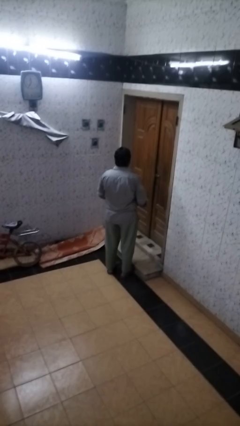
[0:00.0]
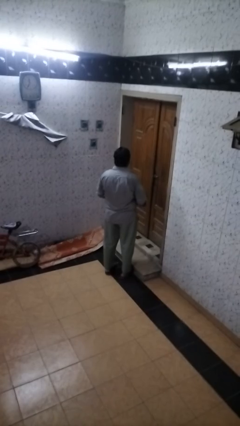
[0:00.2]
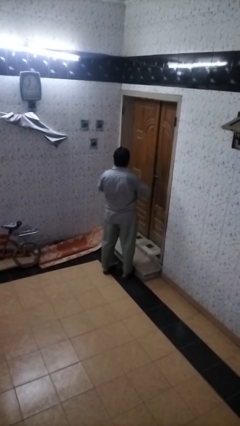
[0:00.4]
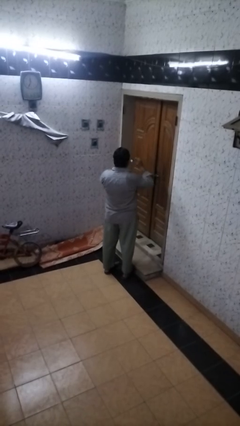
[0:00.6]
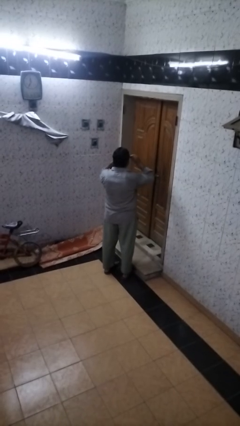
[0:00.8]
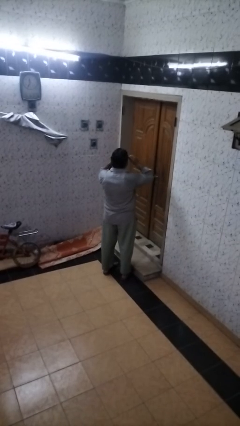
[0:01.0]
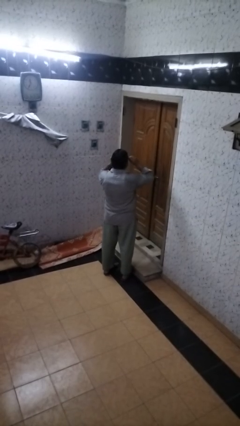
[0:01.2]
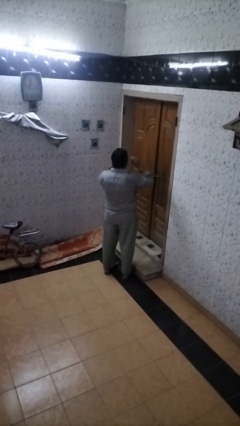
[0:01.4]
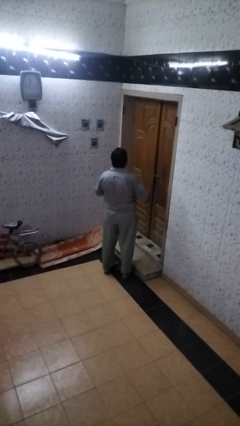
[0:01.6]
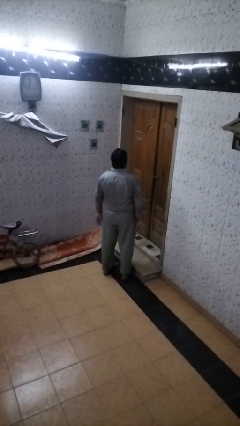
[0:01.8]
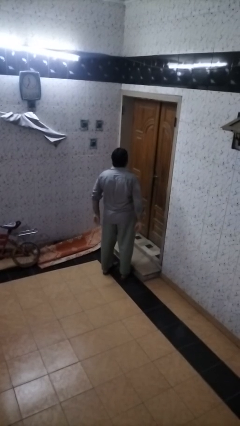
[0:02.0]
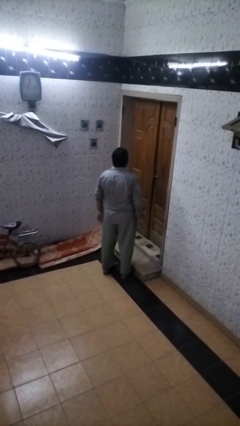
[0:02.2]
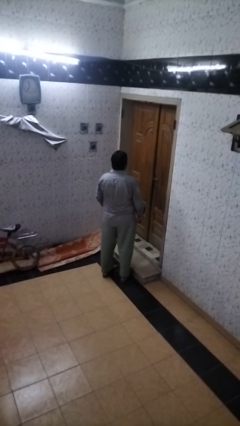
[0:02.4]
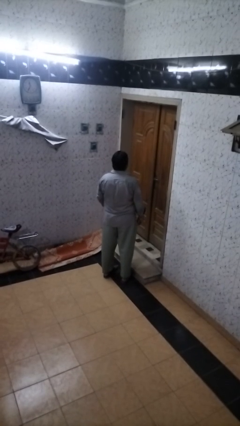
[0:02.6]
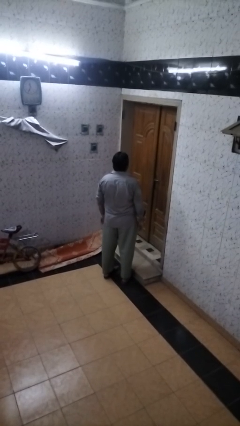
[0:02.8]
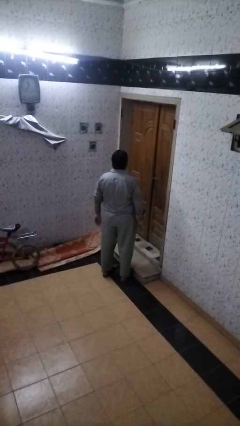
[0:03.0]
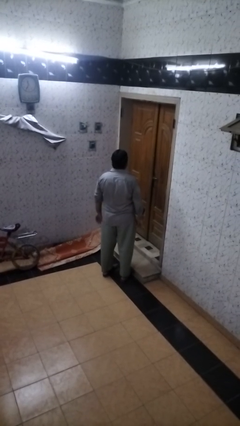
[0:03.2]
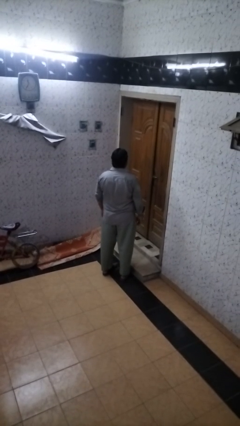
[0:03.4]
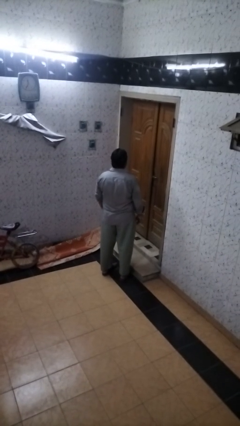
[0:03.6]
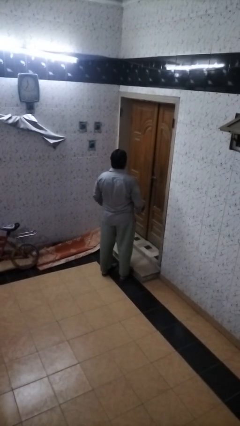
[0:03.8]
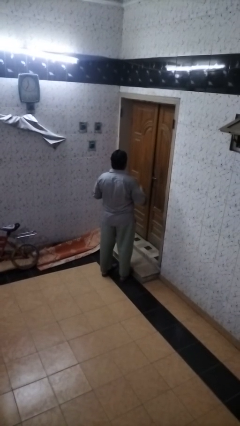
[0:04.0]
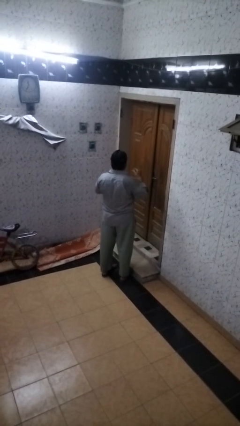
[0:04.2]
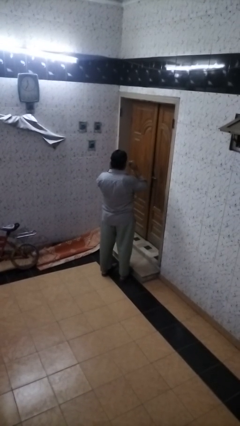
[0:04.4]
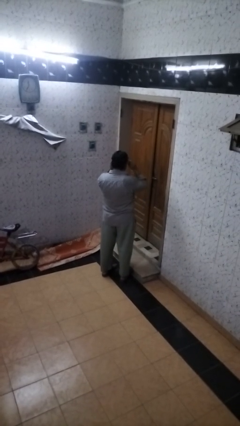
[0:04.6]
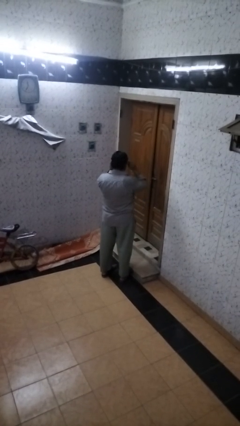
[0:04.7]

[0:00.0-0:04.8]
person puts on sunglasses

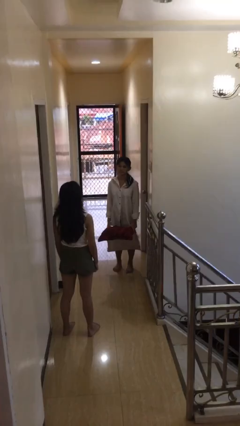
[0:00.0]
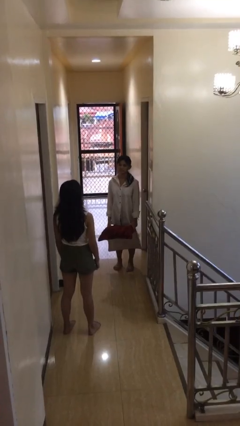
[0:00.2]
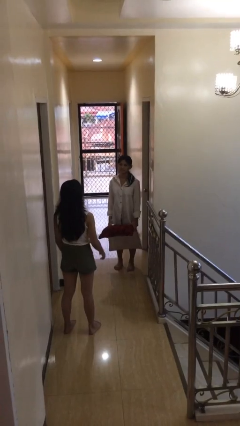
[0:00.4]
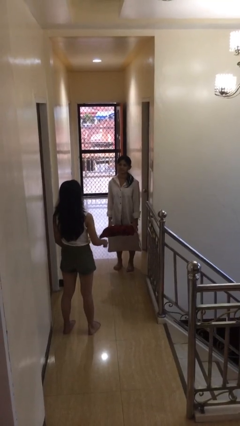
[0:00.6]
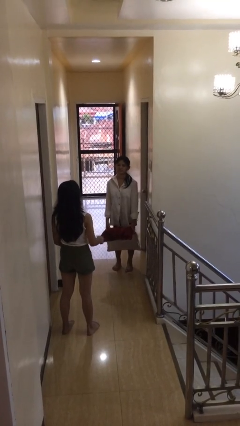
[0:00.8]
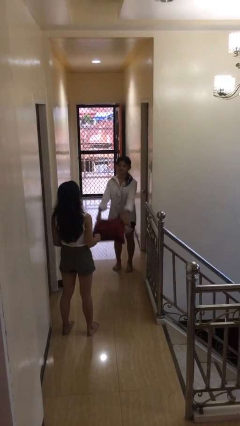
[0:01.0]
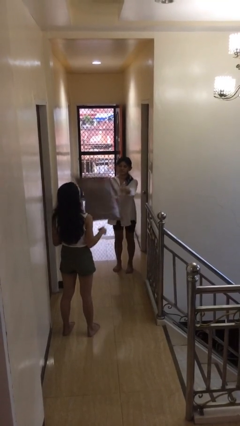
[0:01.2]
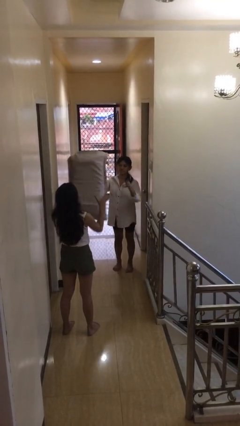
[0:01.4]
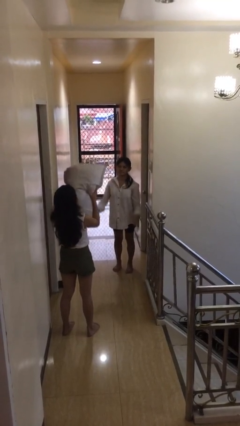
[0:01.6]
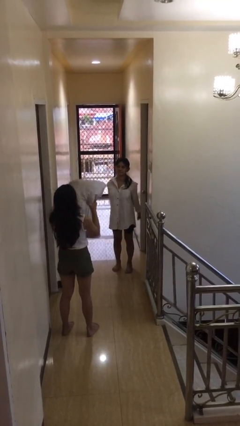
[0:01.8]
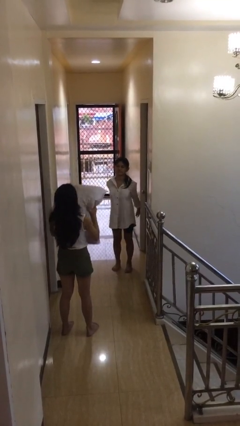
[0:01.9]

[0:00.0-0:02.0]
person throws object to person

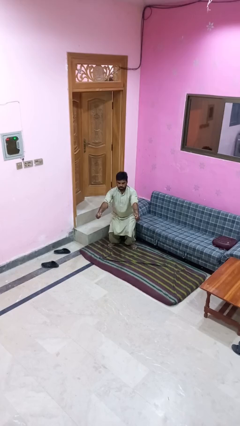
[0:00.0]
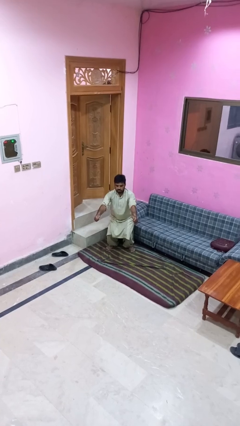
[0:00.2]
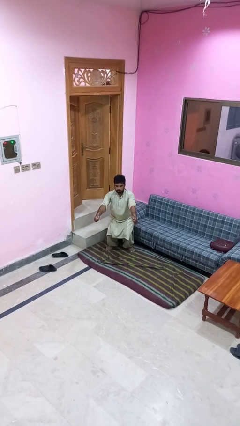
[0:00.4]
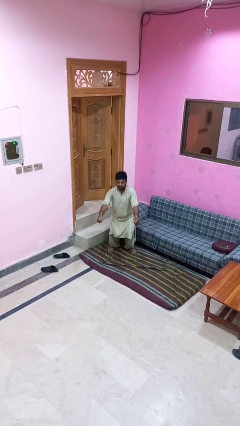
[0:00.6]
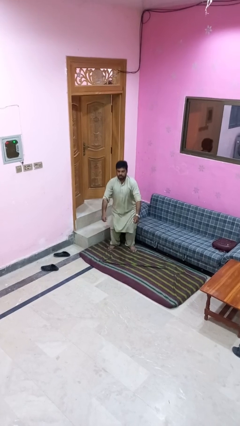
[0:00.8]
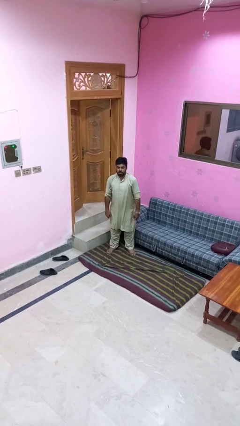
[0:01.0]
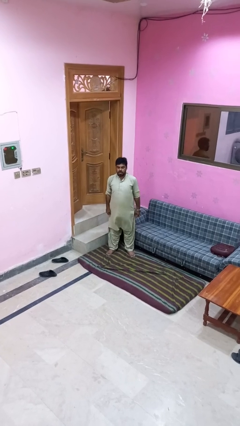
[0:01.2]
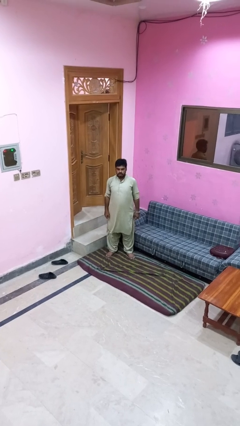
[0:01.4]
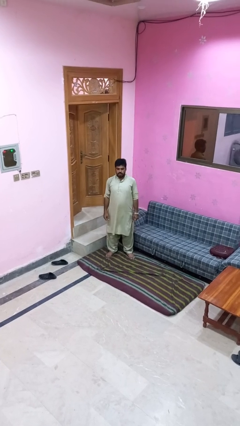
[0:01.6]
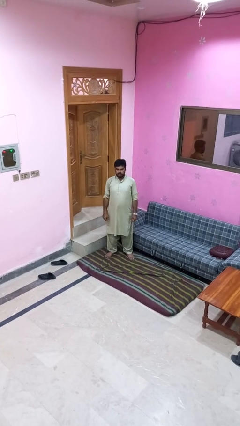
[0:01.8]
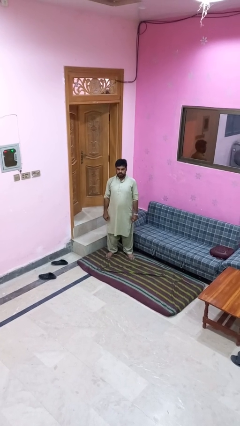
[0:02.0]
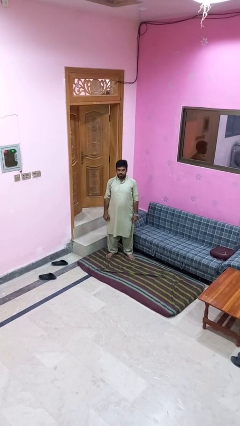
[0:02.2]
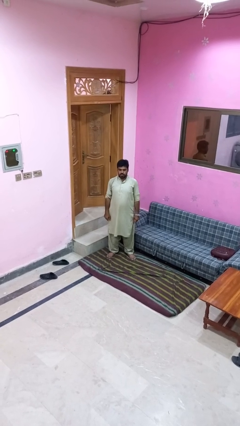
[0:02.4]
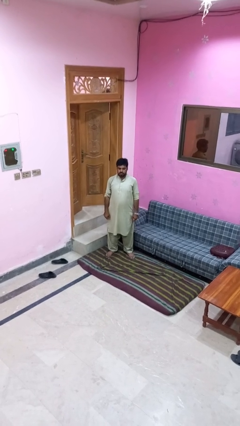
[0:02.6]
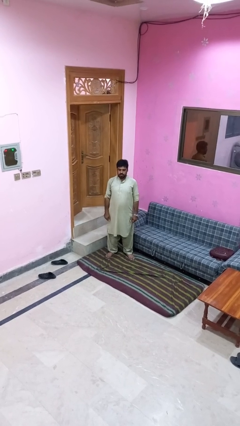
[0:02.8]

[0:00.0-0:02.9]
person stands up

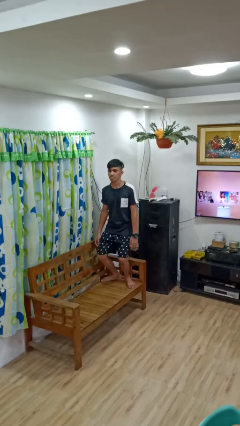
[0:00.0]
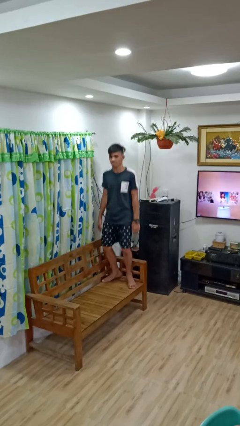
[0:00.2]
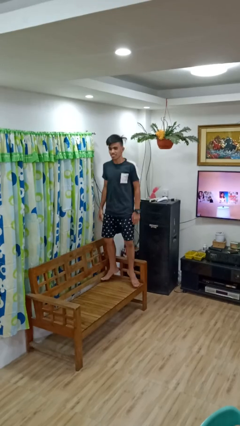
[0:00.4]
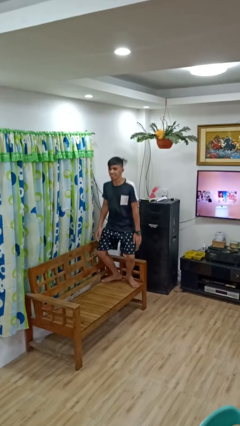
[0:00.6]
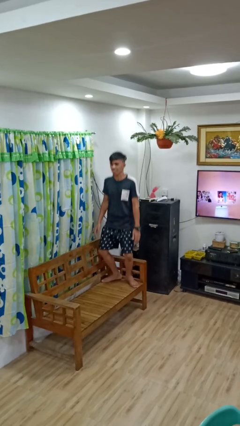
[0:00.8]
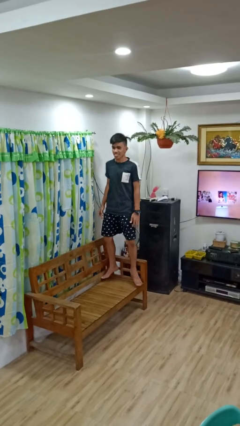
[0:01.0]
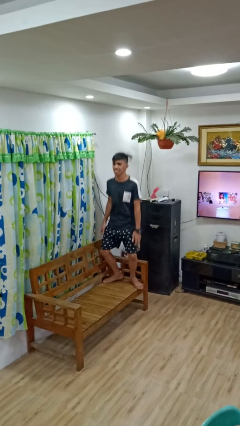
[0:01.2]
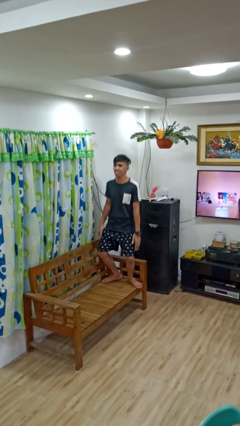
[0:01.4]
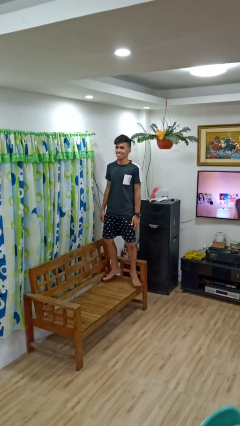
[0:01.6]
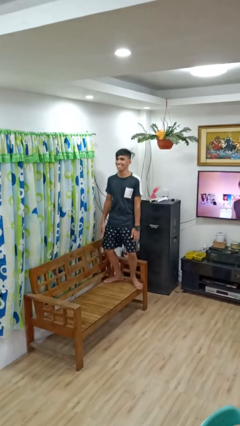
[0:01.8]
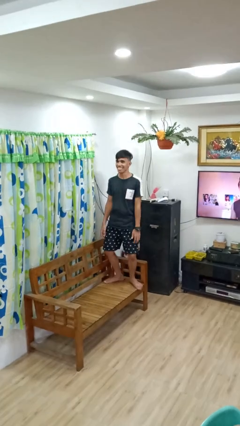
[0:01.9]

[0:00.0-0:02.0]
person jumps on couch

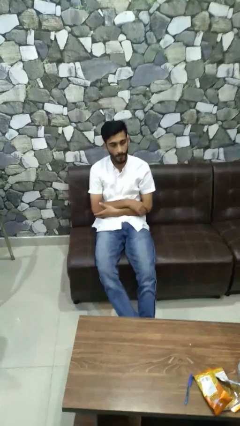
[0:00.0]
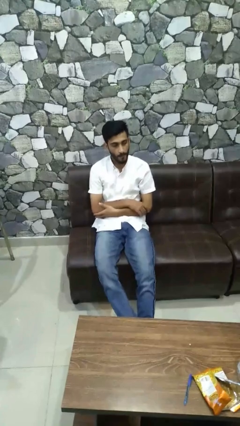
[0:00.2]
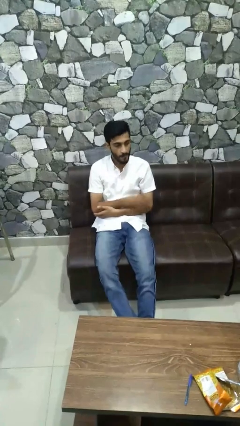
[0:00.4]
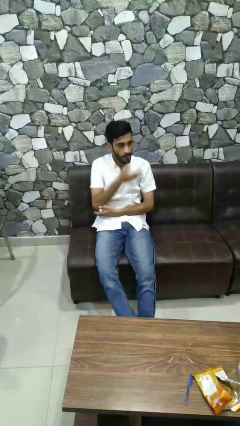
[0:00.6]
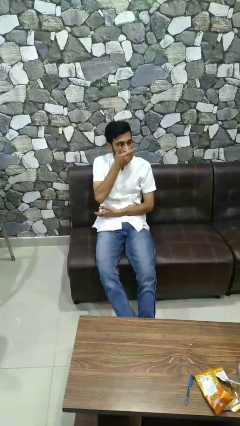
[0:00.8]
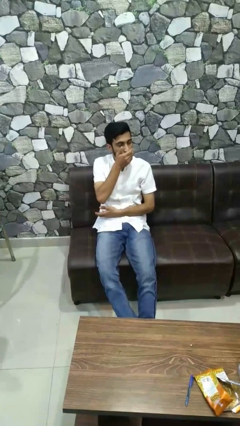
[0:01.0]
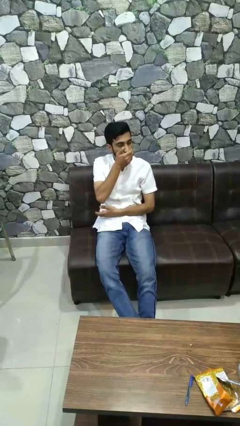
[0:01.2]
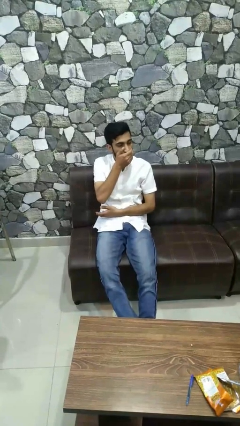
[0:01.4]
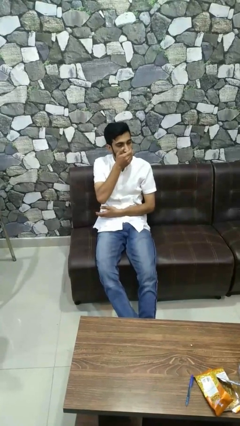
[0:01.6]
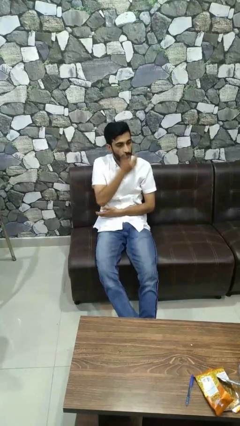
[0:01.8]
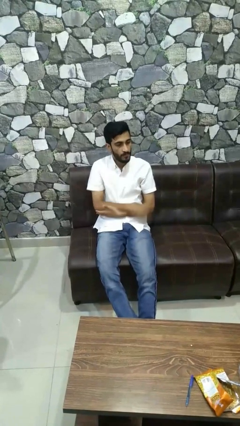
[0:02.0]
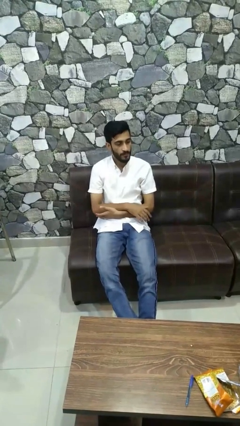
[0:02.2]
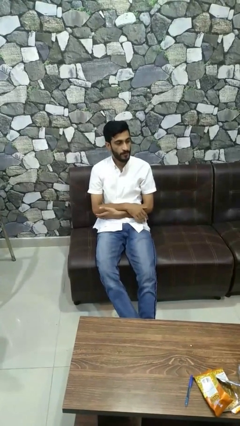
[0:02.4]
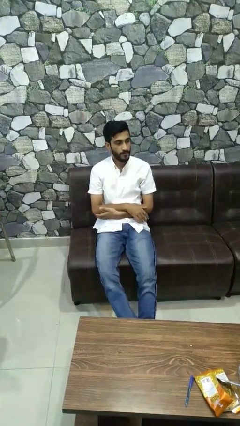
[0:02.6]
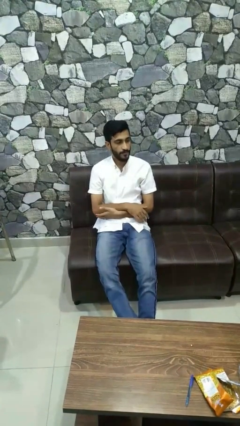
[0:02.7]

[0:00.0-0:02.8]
person covers face with hands

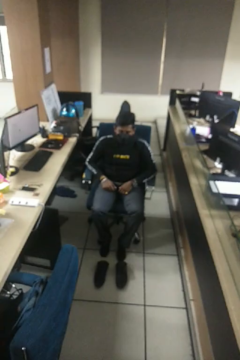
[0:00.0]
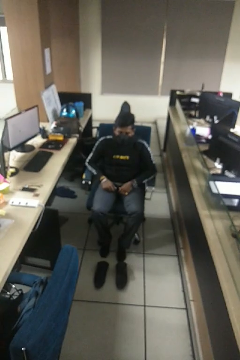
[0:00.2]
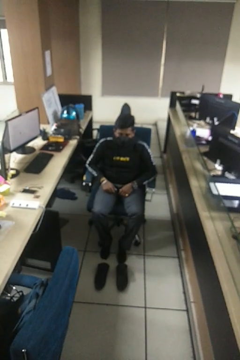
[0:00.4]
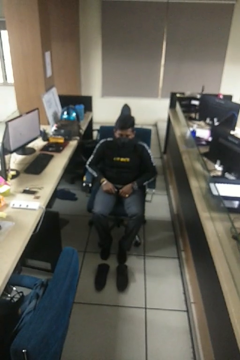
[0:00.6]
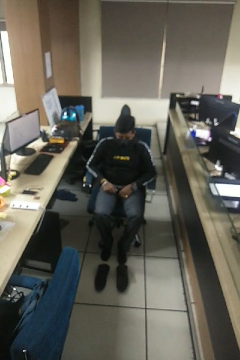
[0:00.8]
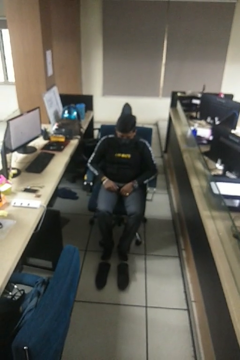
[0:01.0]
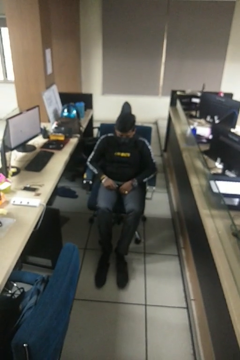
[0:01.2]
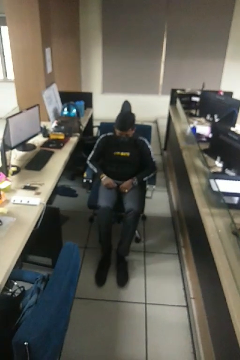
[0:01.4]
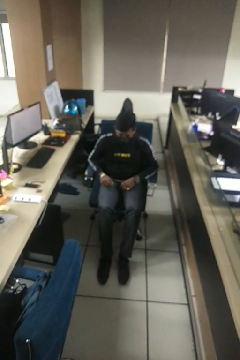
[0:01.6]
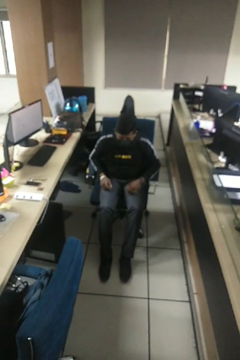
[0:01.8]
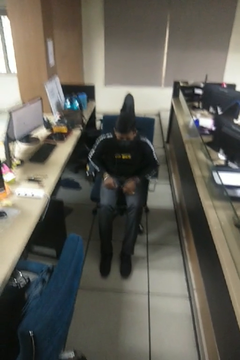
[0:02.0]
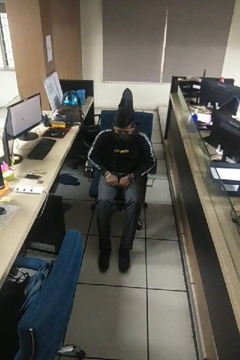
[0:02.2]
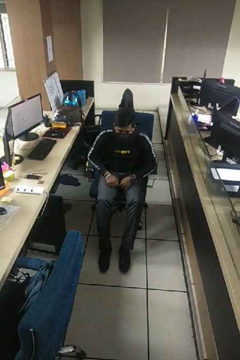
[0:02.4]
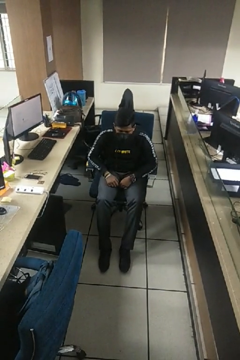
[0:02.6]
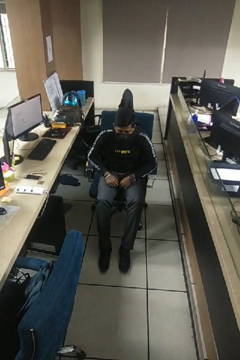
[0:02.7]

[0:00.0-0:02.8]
person puts on shoes
